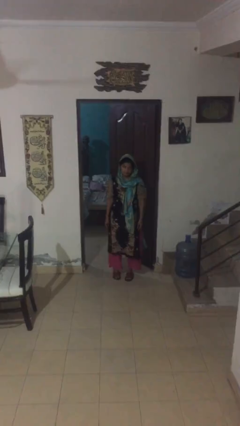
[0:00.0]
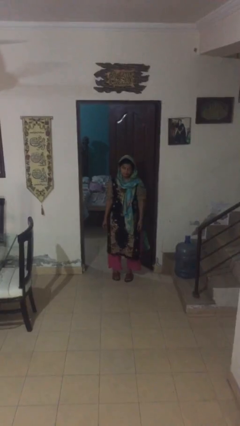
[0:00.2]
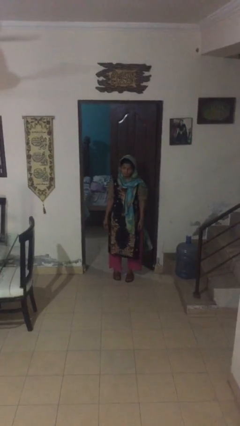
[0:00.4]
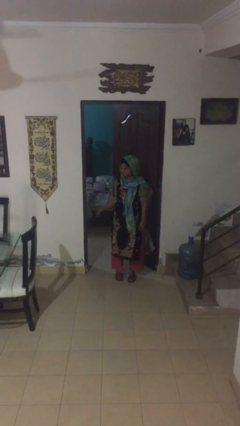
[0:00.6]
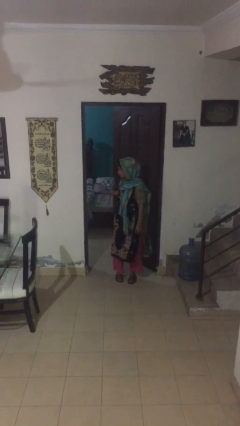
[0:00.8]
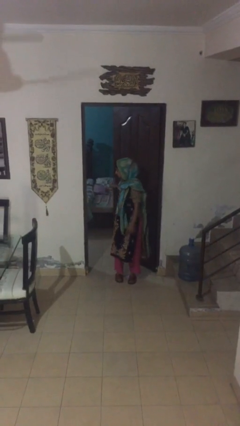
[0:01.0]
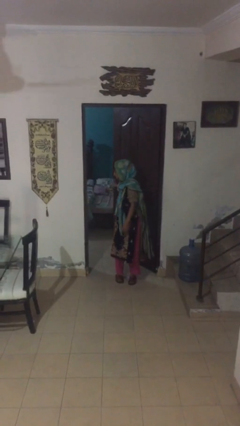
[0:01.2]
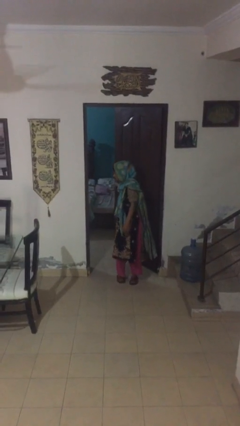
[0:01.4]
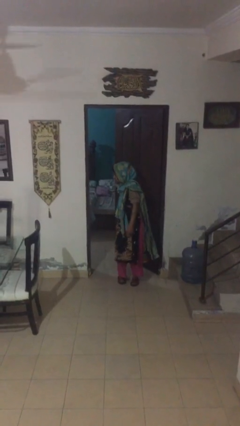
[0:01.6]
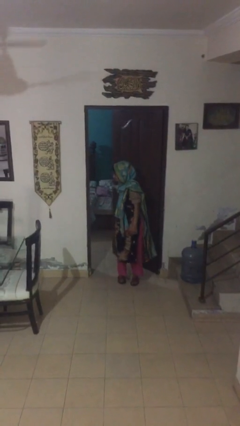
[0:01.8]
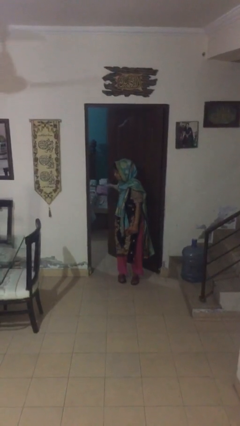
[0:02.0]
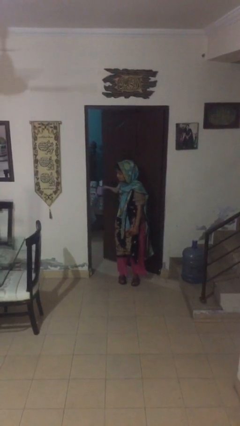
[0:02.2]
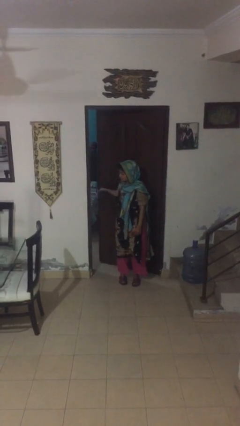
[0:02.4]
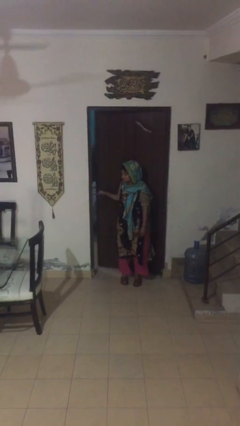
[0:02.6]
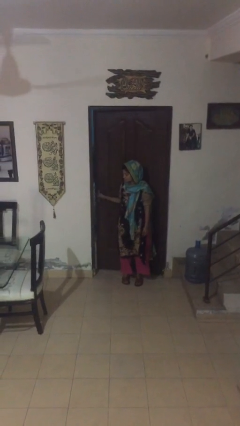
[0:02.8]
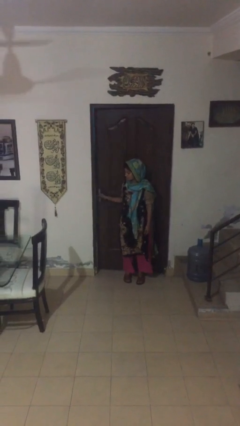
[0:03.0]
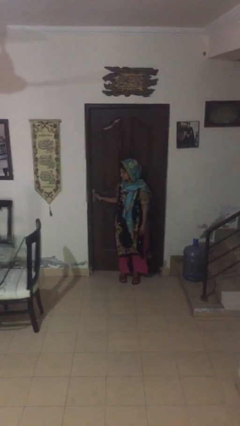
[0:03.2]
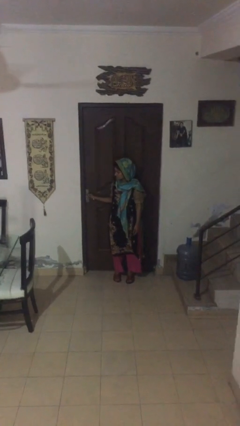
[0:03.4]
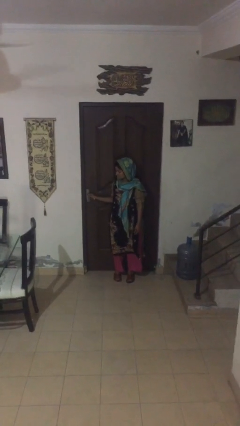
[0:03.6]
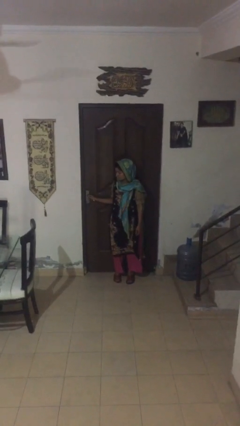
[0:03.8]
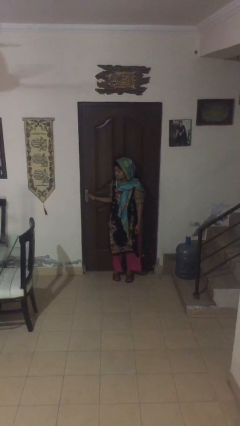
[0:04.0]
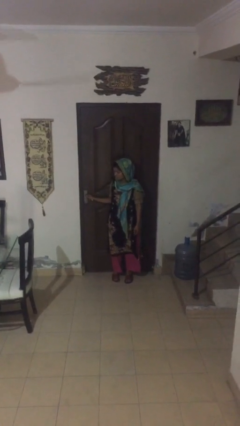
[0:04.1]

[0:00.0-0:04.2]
person closes facility door

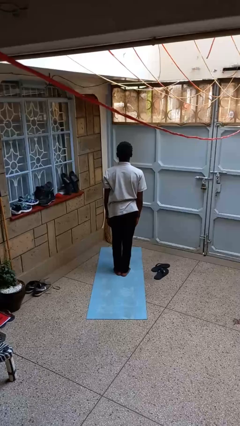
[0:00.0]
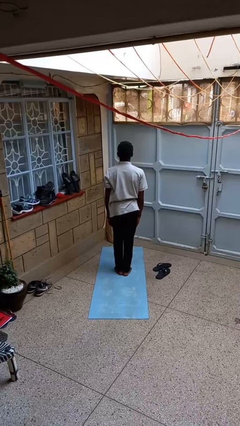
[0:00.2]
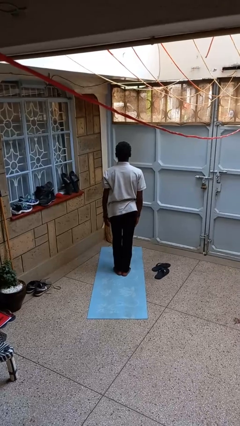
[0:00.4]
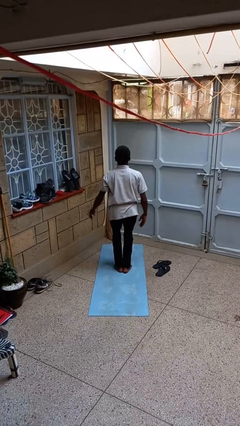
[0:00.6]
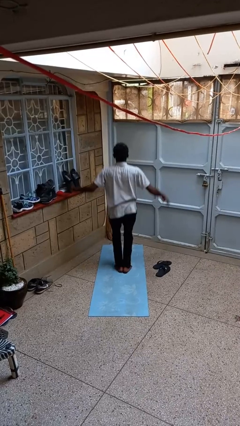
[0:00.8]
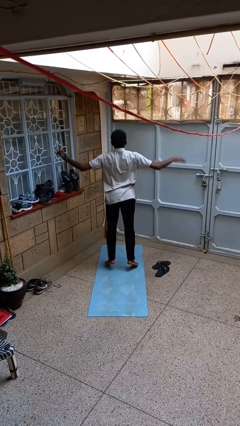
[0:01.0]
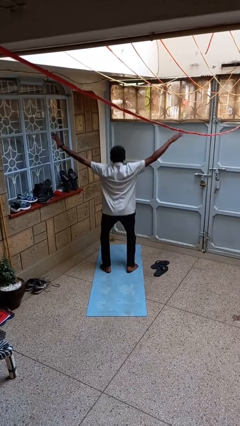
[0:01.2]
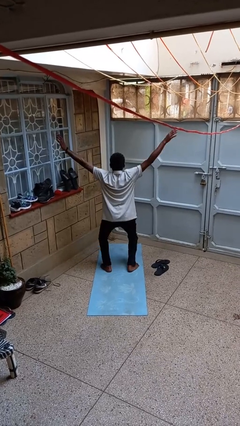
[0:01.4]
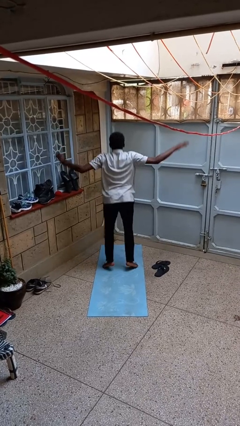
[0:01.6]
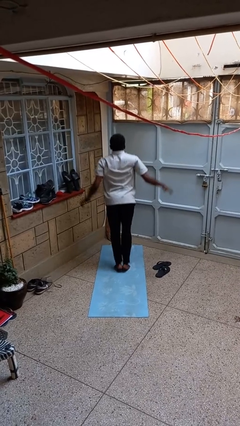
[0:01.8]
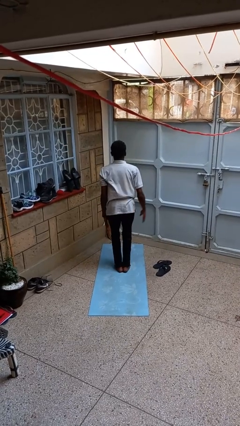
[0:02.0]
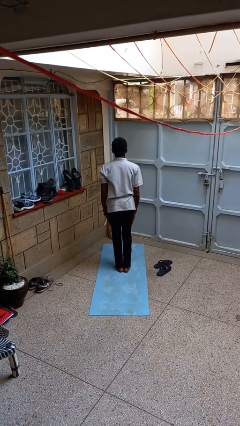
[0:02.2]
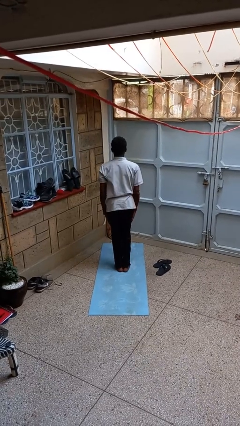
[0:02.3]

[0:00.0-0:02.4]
person exercises with jumping jacks

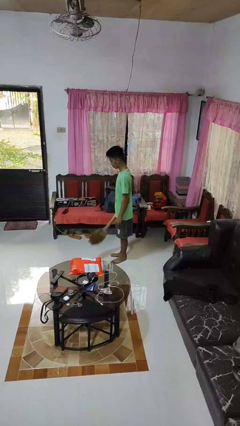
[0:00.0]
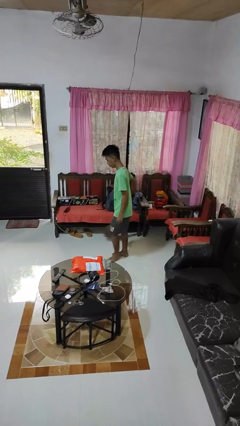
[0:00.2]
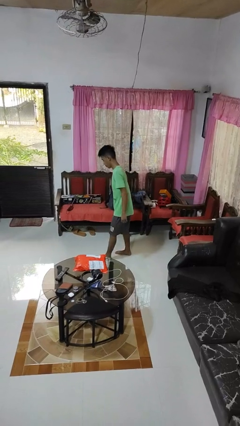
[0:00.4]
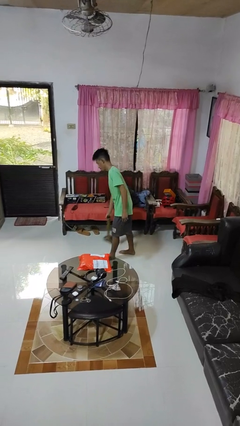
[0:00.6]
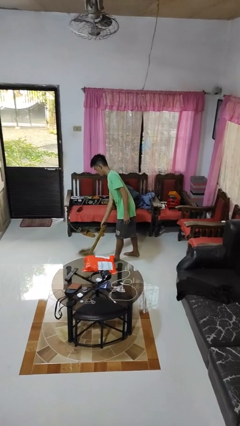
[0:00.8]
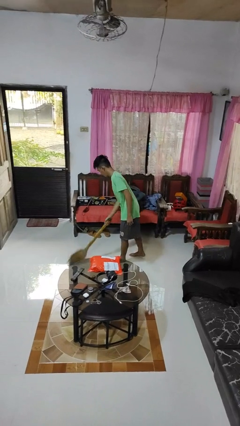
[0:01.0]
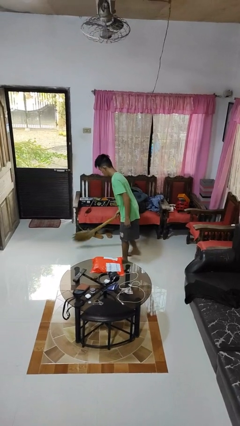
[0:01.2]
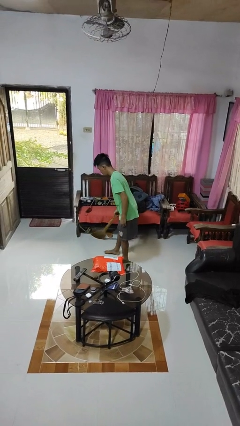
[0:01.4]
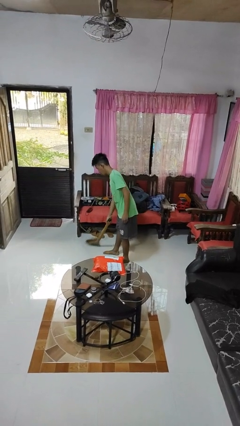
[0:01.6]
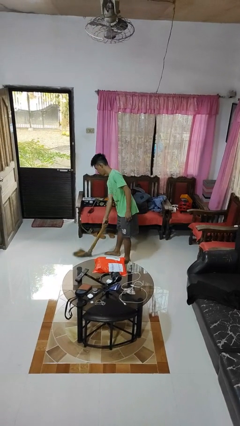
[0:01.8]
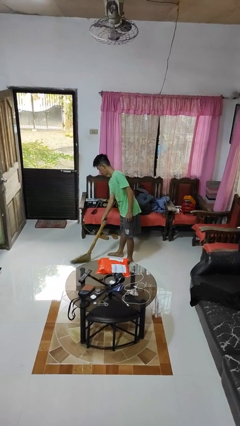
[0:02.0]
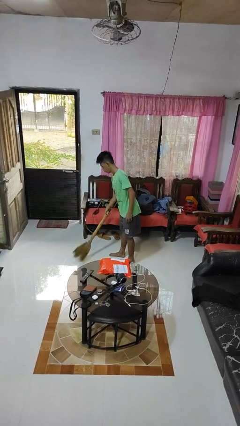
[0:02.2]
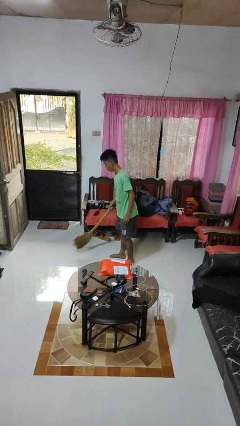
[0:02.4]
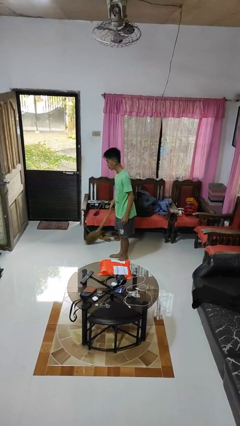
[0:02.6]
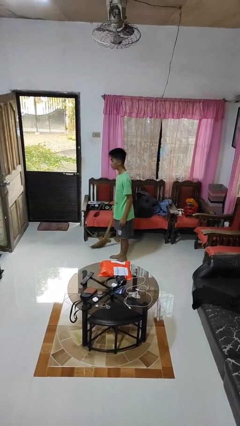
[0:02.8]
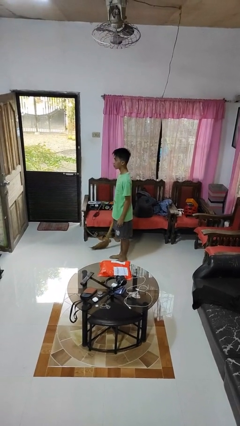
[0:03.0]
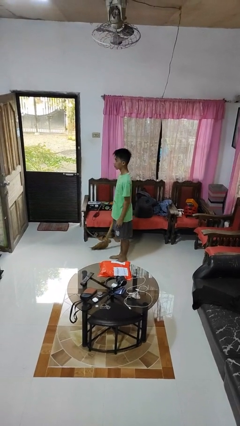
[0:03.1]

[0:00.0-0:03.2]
person sweeps floor

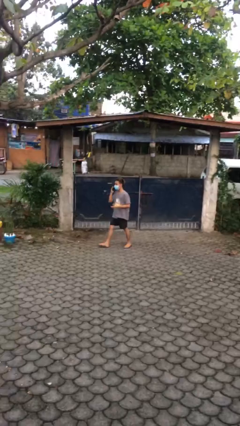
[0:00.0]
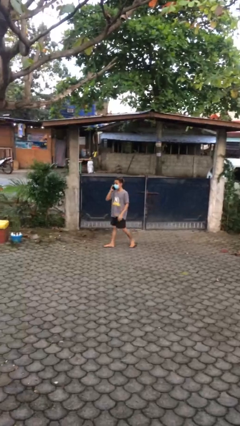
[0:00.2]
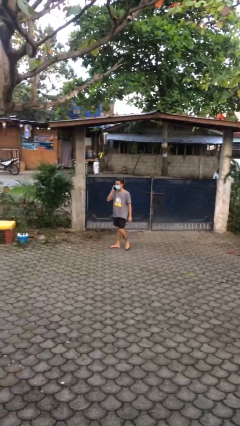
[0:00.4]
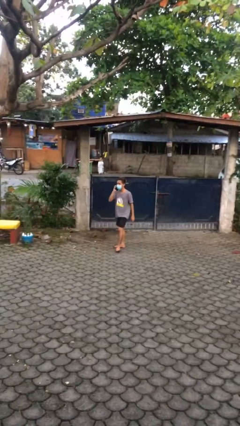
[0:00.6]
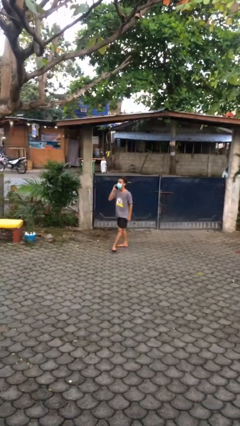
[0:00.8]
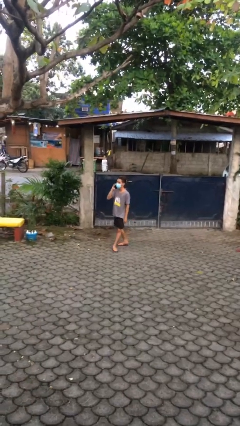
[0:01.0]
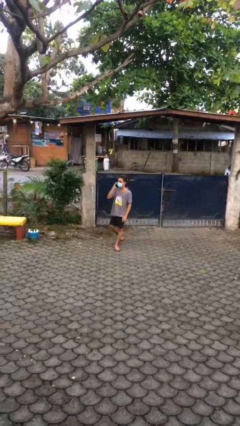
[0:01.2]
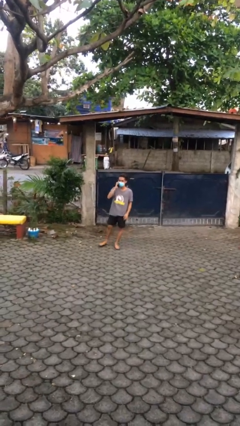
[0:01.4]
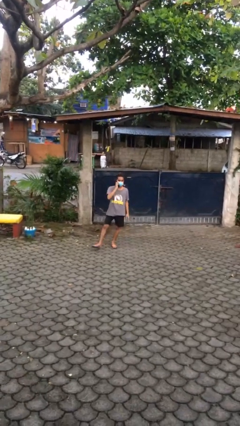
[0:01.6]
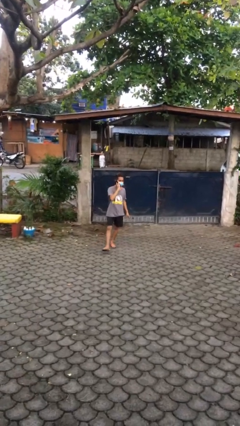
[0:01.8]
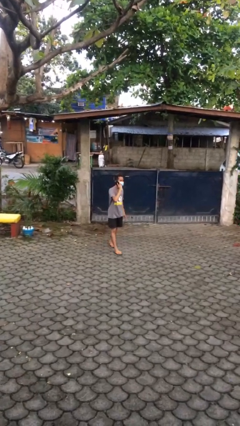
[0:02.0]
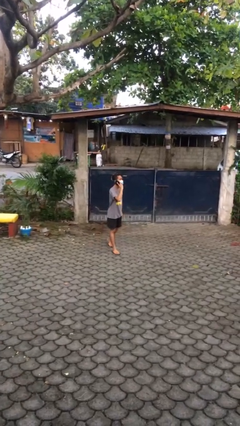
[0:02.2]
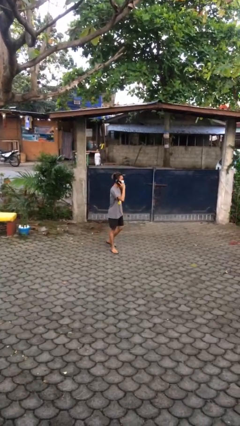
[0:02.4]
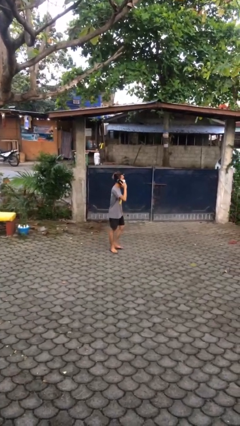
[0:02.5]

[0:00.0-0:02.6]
person talks on phone

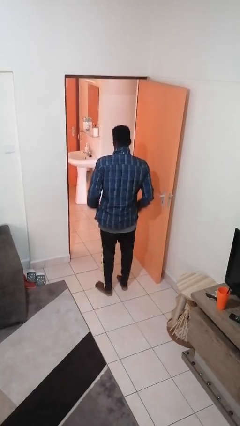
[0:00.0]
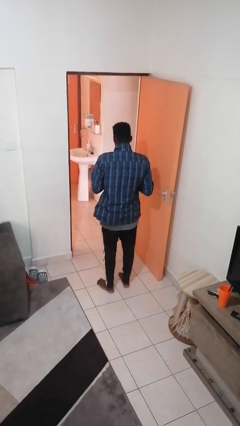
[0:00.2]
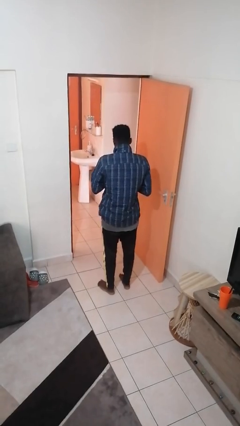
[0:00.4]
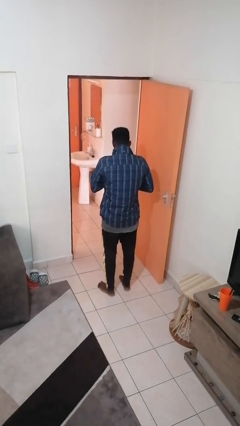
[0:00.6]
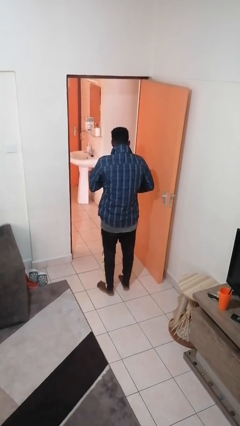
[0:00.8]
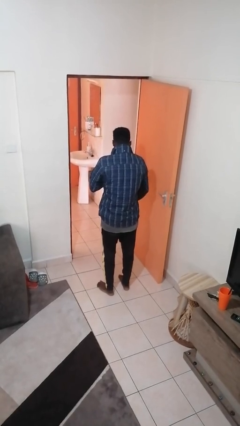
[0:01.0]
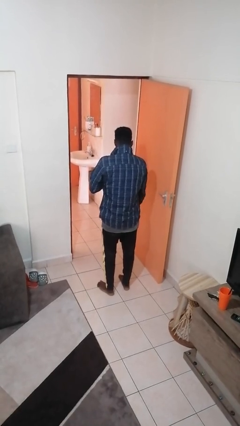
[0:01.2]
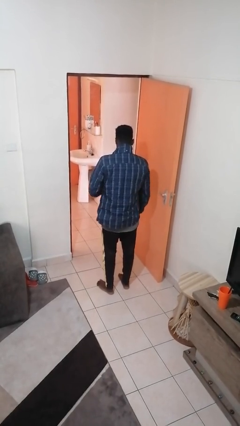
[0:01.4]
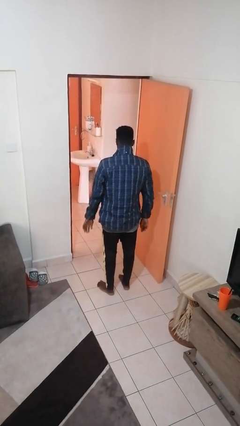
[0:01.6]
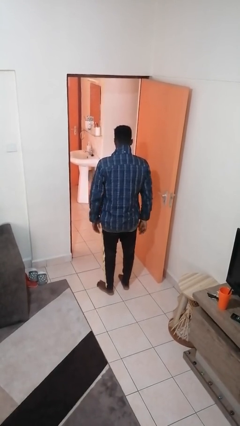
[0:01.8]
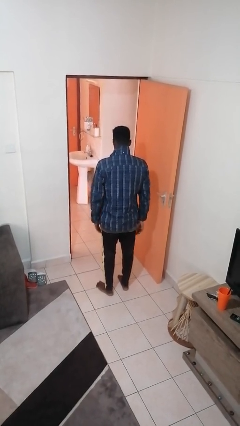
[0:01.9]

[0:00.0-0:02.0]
person unzips jacket

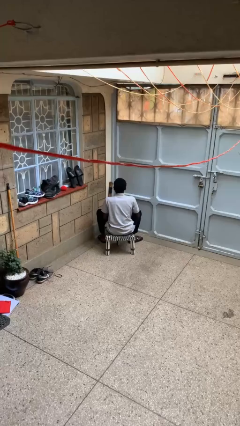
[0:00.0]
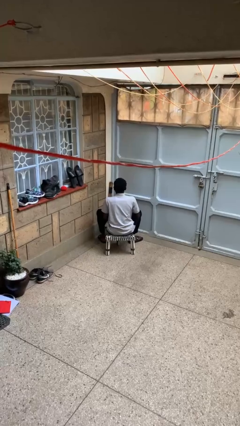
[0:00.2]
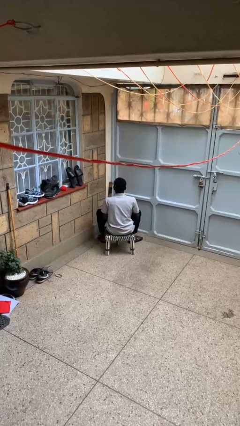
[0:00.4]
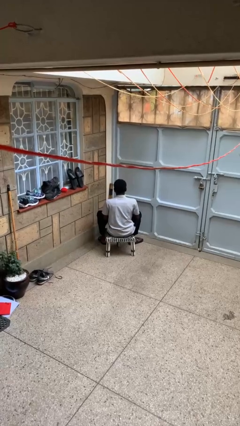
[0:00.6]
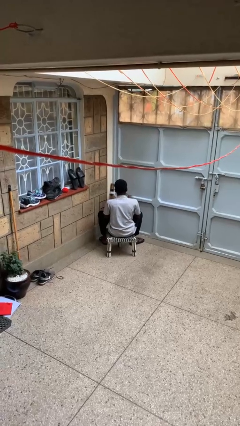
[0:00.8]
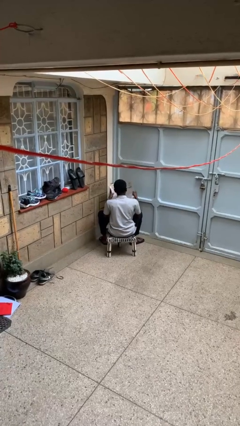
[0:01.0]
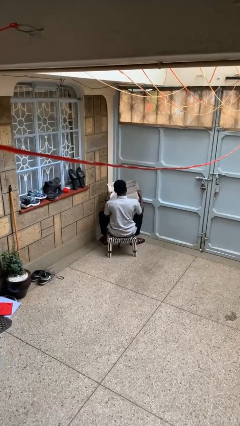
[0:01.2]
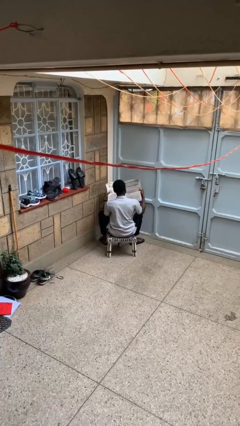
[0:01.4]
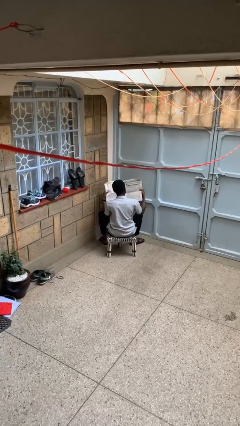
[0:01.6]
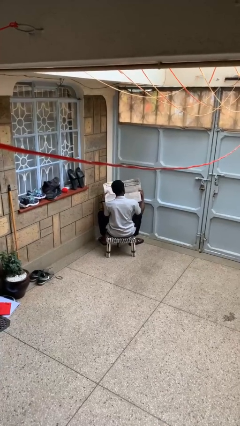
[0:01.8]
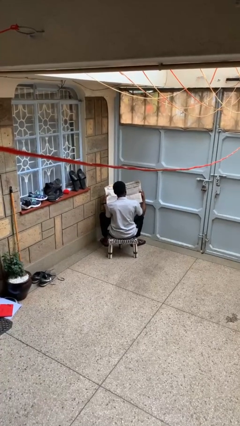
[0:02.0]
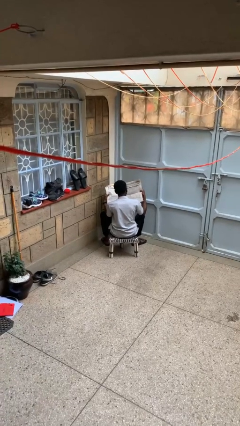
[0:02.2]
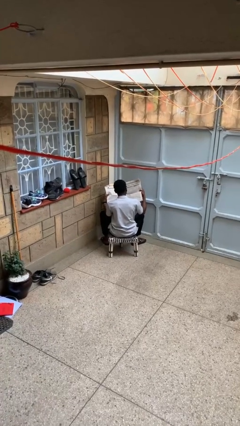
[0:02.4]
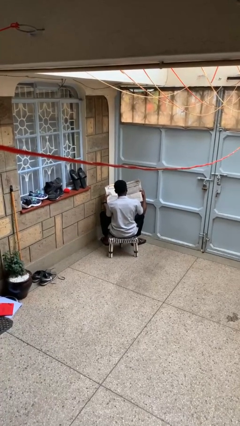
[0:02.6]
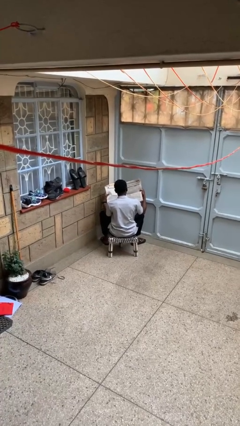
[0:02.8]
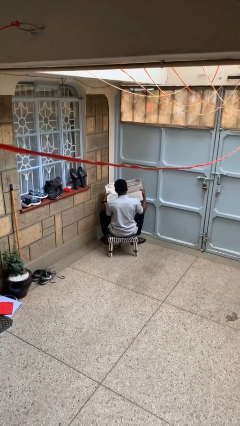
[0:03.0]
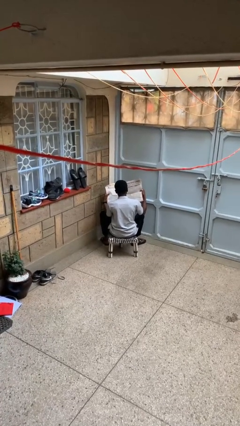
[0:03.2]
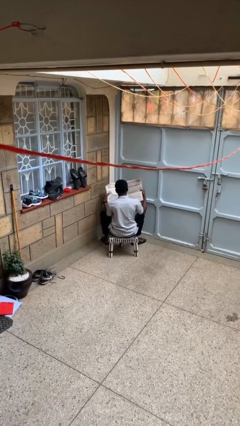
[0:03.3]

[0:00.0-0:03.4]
person reads newspaper
